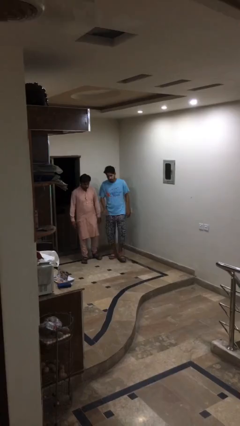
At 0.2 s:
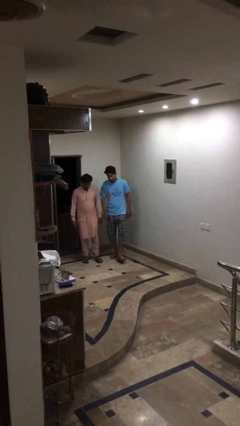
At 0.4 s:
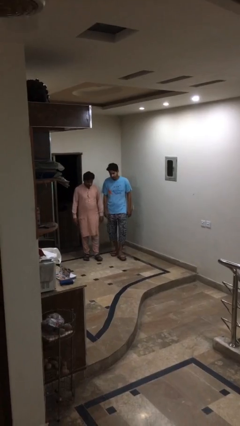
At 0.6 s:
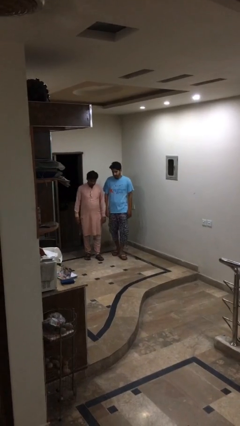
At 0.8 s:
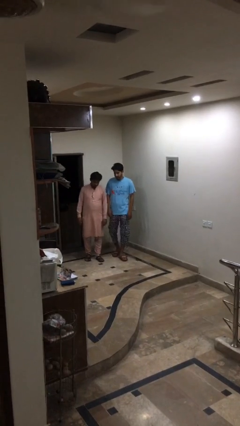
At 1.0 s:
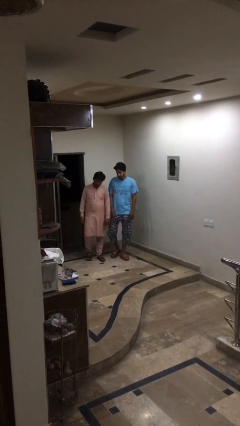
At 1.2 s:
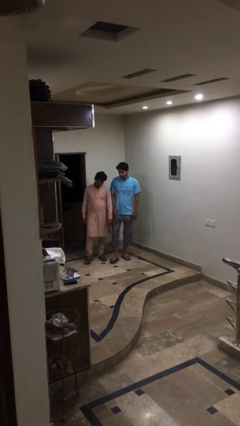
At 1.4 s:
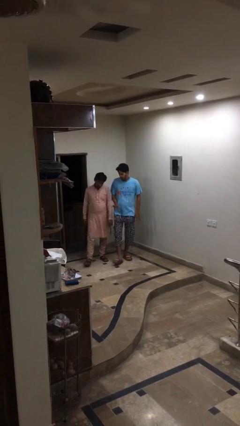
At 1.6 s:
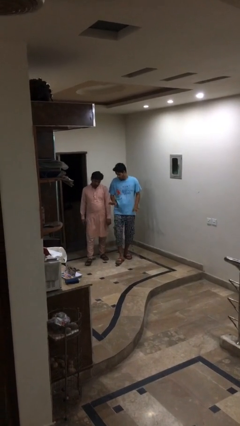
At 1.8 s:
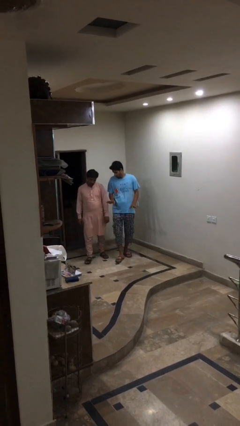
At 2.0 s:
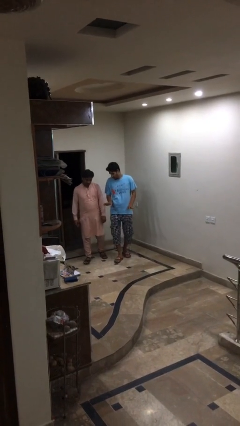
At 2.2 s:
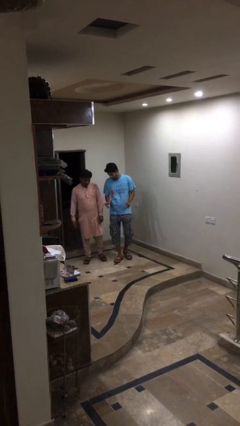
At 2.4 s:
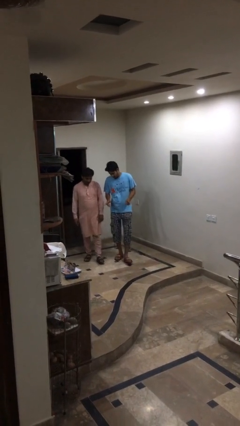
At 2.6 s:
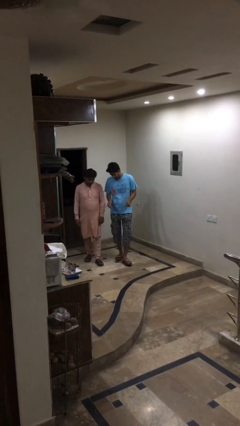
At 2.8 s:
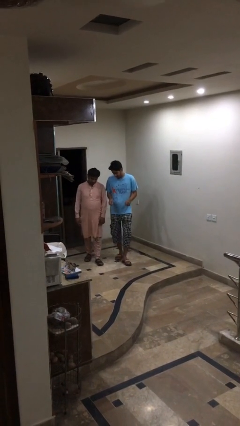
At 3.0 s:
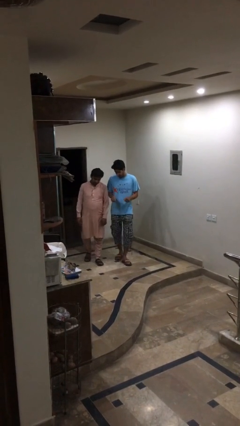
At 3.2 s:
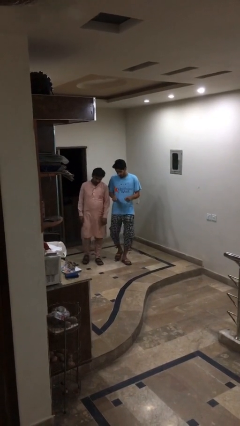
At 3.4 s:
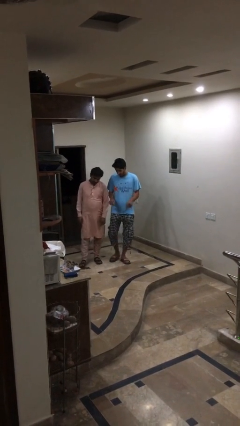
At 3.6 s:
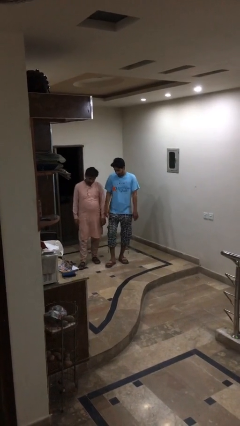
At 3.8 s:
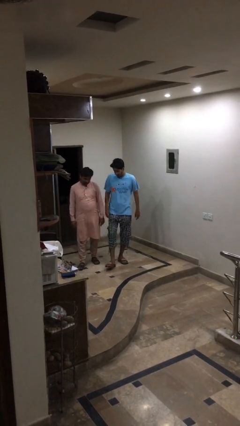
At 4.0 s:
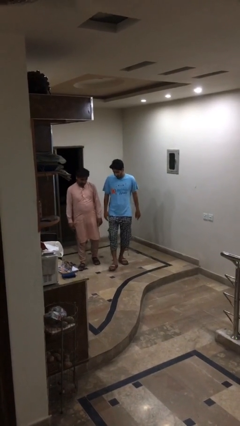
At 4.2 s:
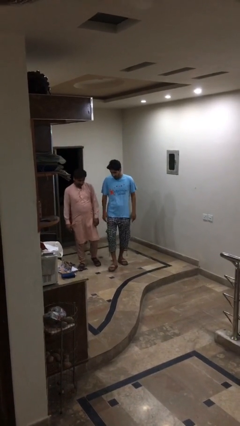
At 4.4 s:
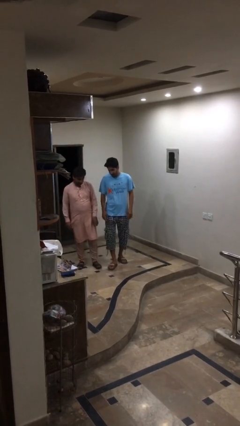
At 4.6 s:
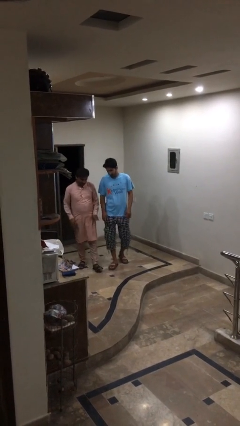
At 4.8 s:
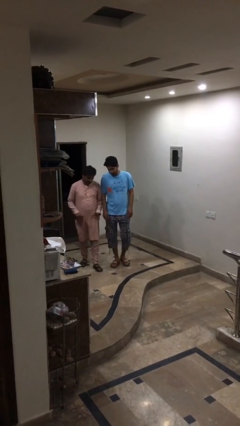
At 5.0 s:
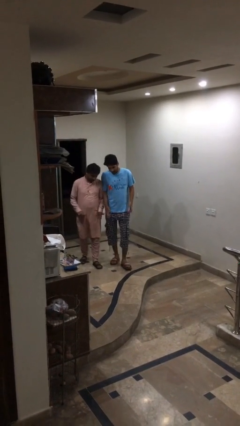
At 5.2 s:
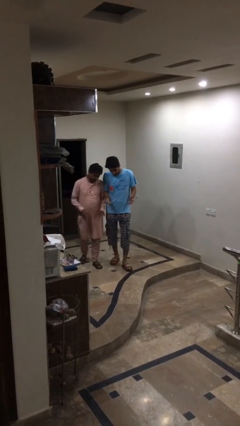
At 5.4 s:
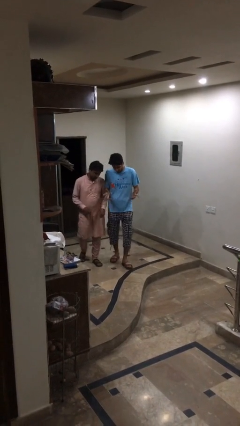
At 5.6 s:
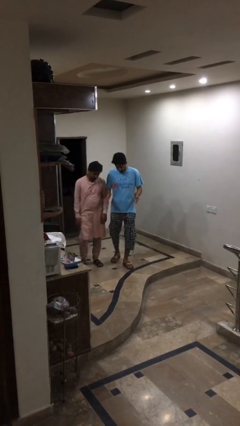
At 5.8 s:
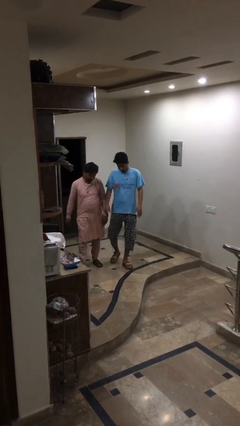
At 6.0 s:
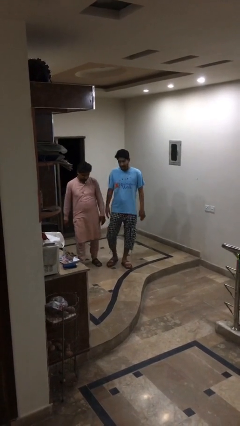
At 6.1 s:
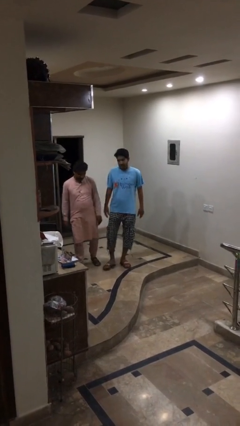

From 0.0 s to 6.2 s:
person talks to person

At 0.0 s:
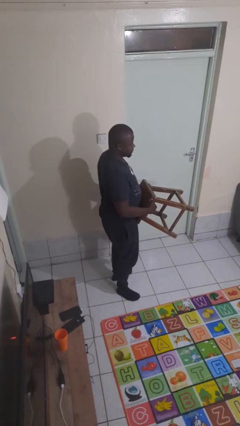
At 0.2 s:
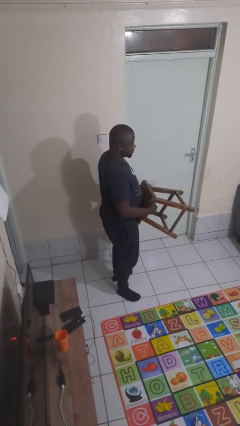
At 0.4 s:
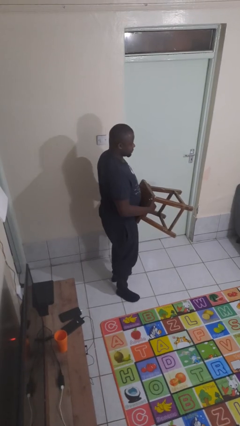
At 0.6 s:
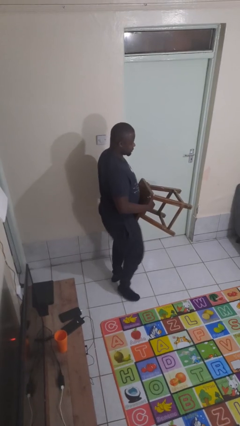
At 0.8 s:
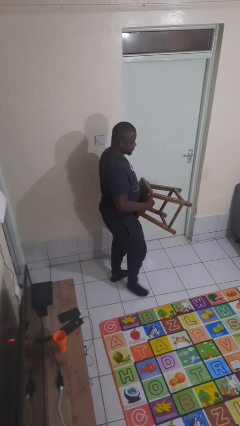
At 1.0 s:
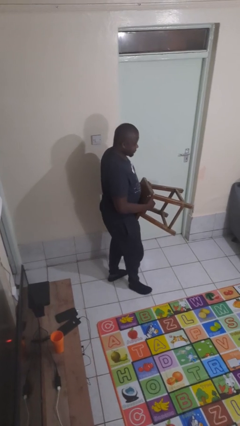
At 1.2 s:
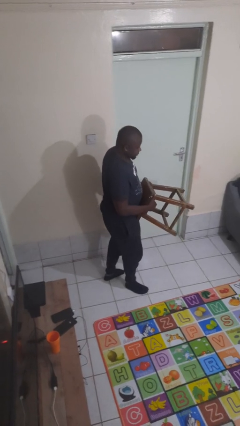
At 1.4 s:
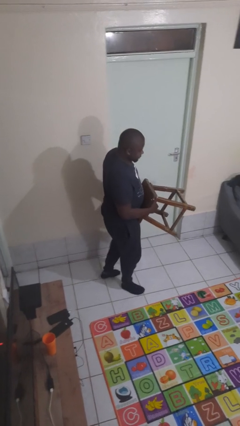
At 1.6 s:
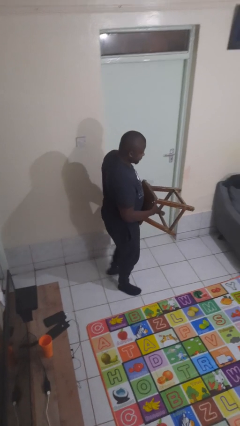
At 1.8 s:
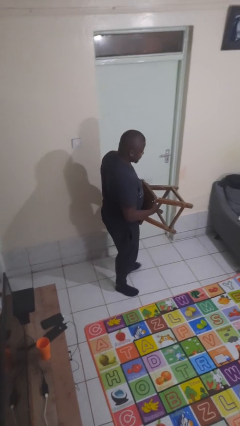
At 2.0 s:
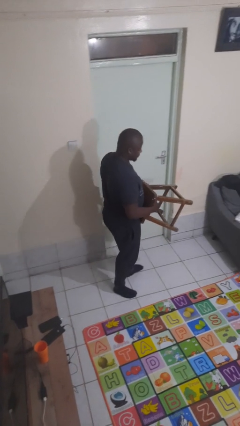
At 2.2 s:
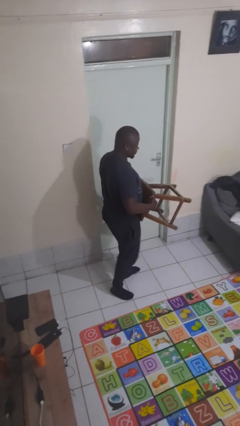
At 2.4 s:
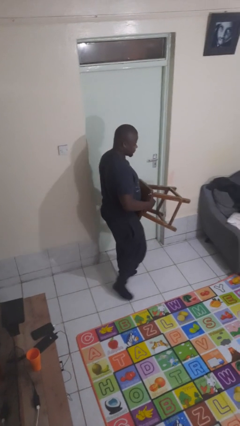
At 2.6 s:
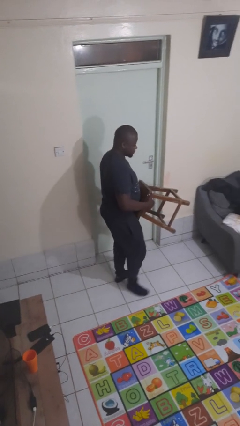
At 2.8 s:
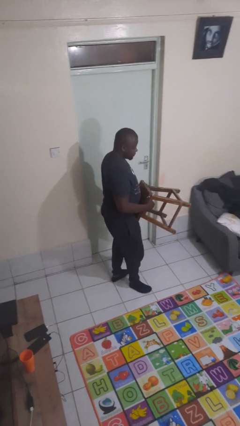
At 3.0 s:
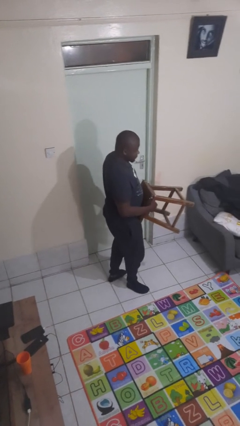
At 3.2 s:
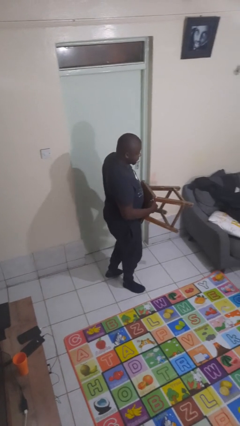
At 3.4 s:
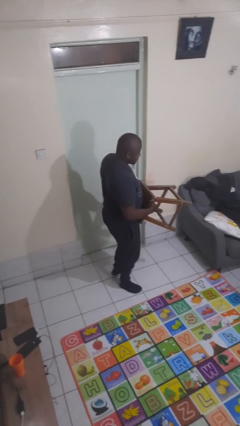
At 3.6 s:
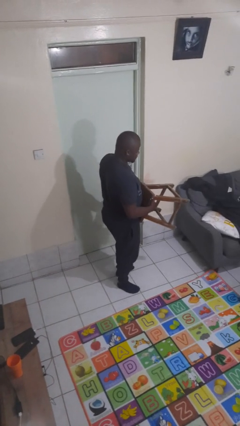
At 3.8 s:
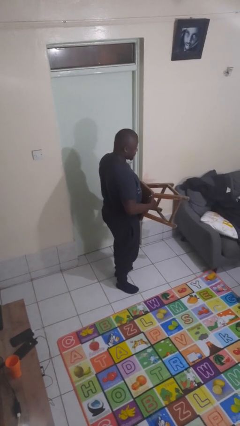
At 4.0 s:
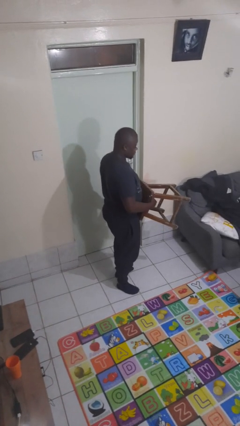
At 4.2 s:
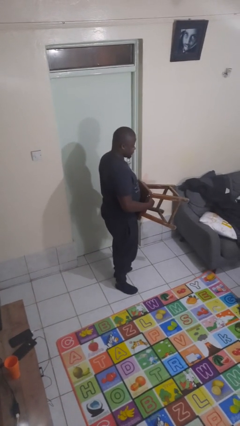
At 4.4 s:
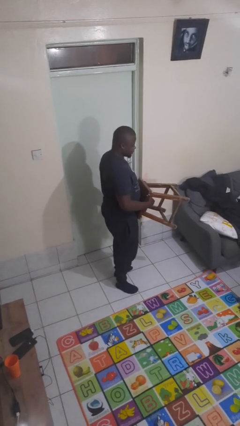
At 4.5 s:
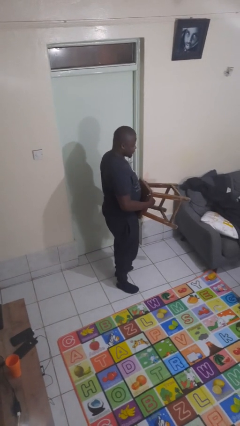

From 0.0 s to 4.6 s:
person carries furniture

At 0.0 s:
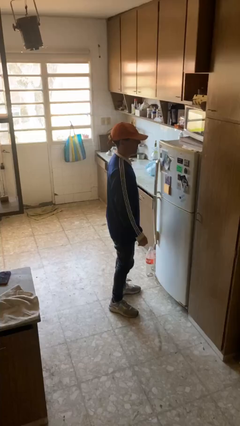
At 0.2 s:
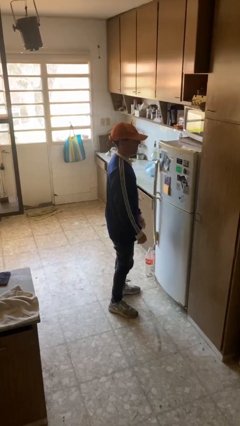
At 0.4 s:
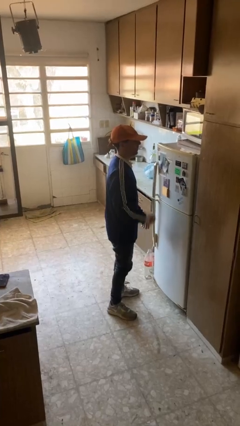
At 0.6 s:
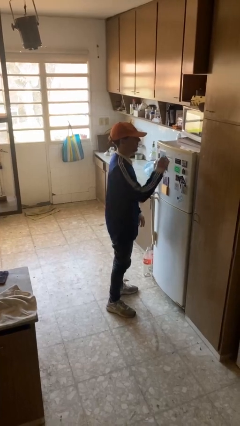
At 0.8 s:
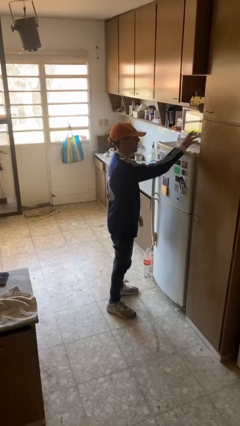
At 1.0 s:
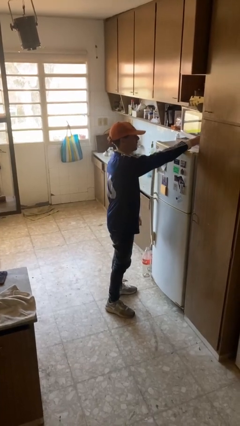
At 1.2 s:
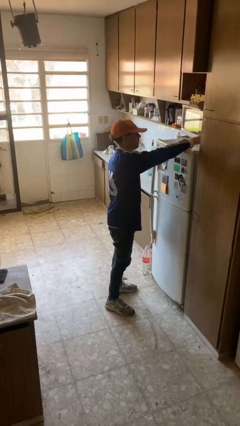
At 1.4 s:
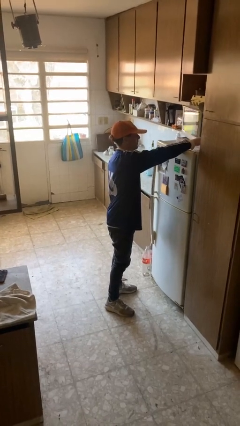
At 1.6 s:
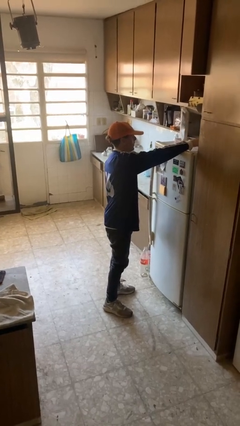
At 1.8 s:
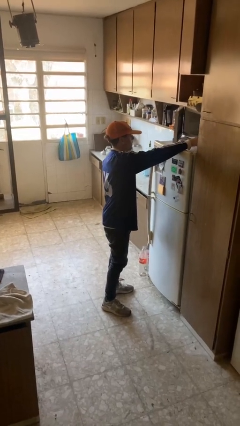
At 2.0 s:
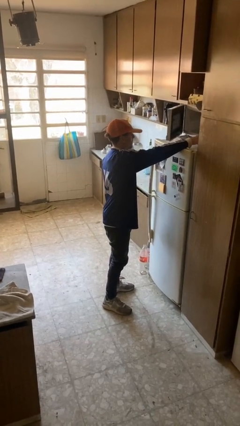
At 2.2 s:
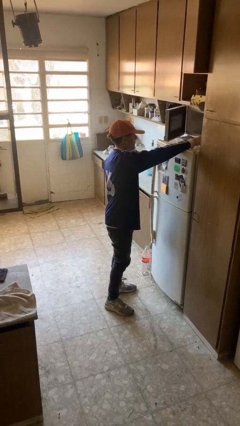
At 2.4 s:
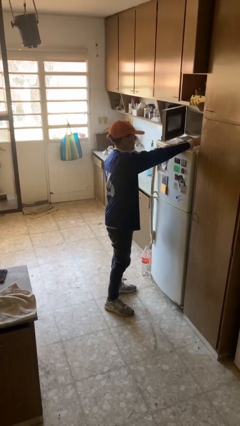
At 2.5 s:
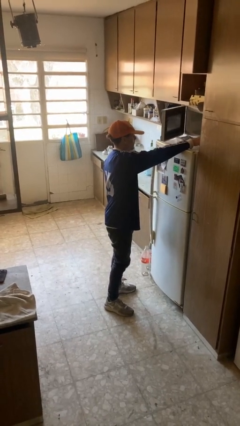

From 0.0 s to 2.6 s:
person opens microwave

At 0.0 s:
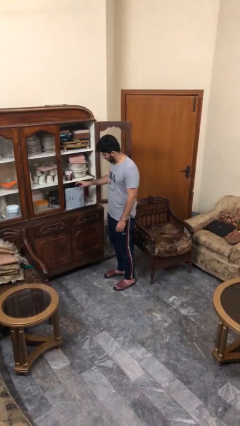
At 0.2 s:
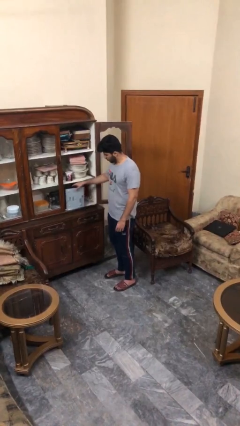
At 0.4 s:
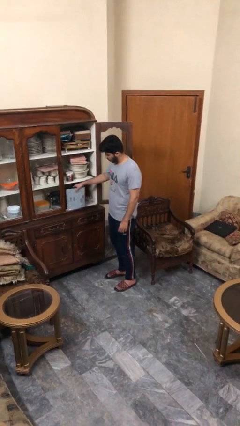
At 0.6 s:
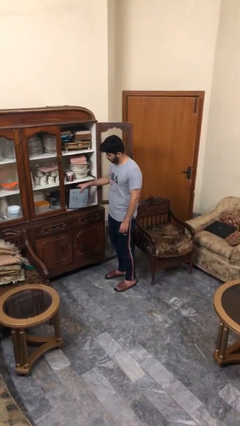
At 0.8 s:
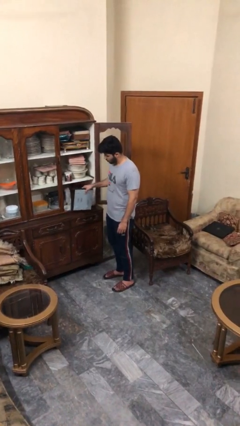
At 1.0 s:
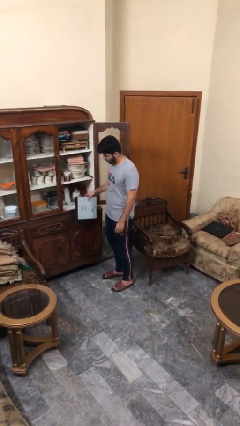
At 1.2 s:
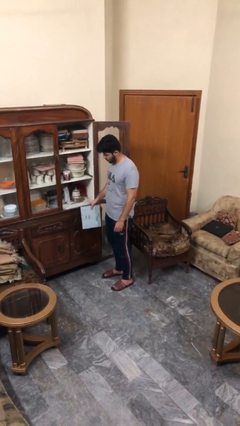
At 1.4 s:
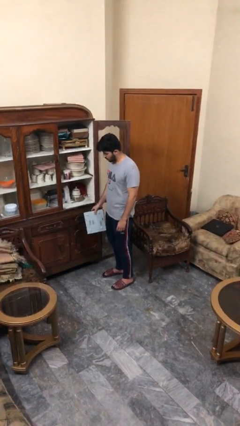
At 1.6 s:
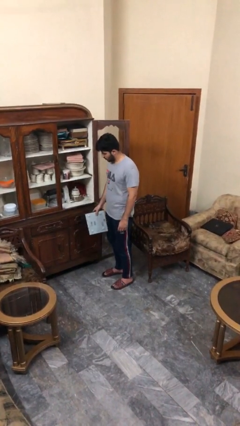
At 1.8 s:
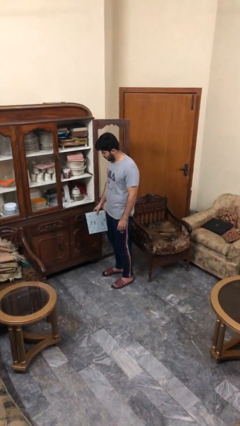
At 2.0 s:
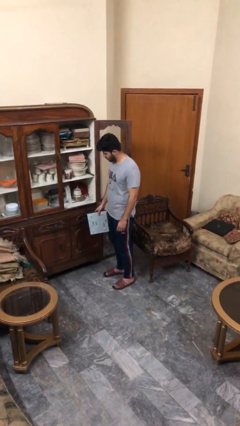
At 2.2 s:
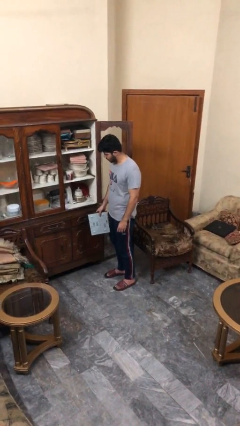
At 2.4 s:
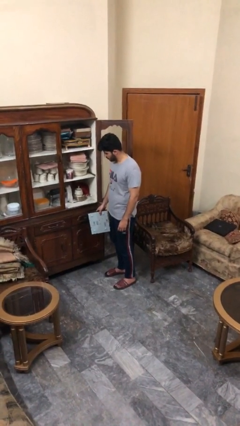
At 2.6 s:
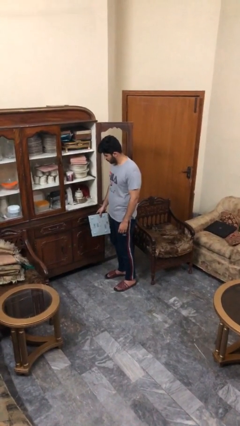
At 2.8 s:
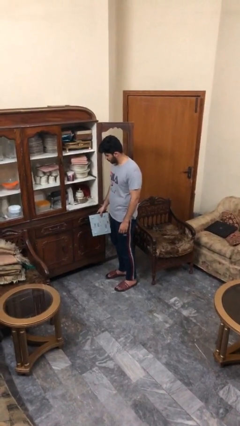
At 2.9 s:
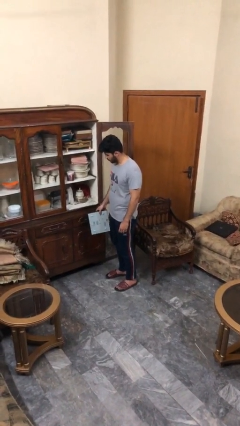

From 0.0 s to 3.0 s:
person picks up object from cabinet

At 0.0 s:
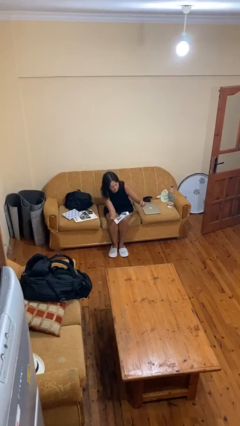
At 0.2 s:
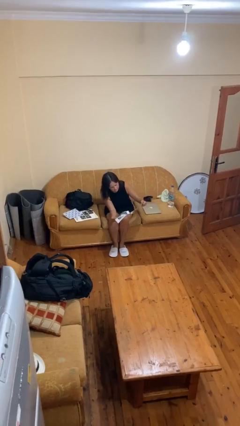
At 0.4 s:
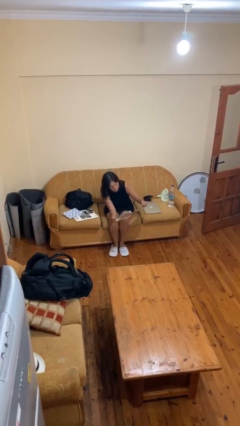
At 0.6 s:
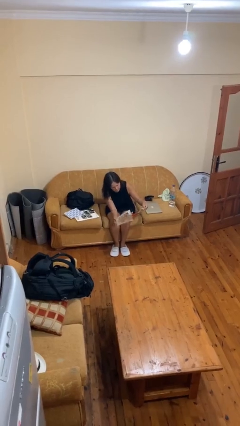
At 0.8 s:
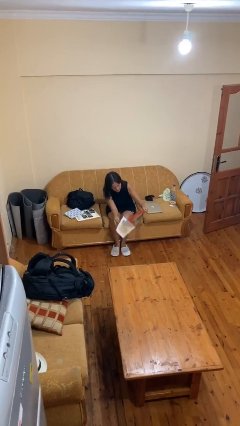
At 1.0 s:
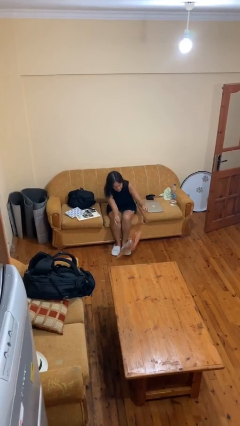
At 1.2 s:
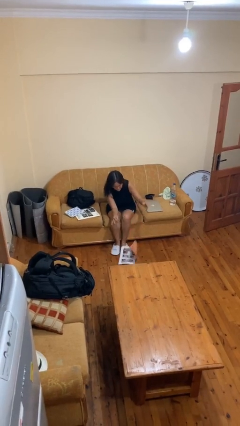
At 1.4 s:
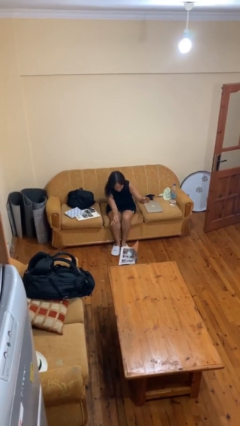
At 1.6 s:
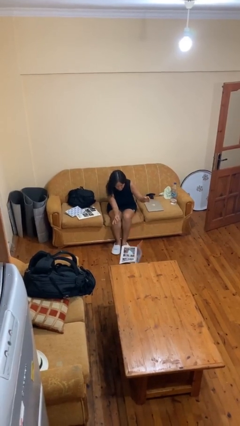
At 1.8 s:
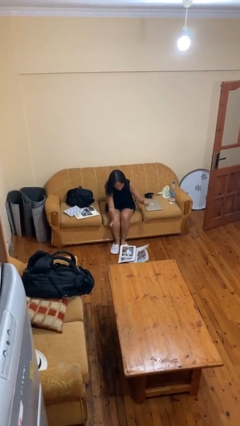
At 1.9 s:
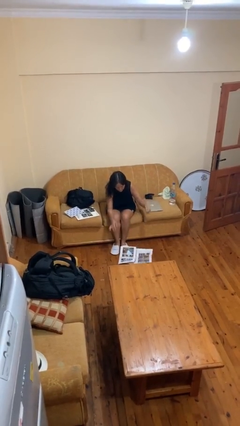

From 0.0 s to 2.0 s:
person drops object
